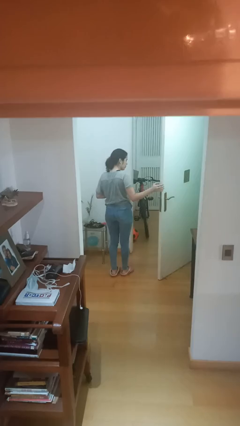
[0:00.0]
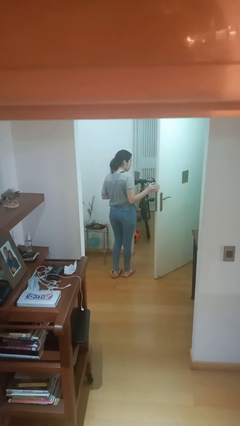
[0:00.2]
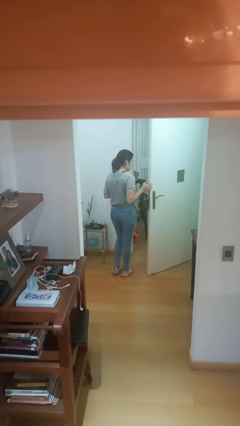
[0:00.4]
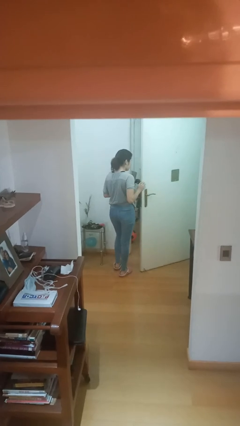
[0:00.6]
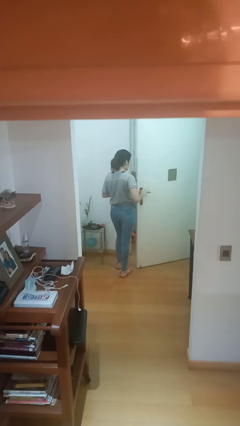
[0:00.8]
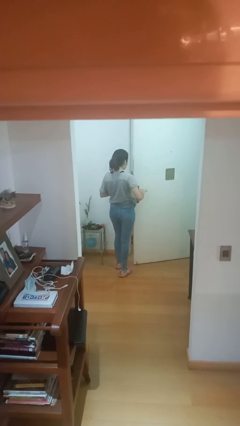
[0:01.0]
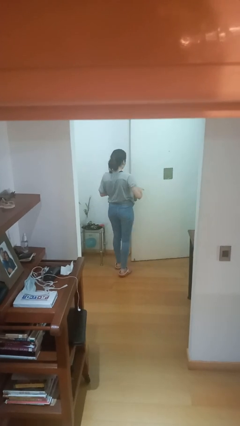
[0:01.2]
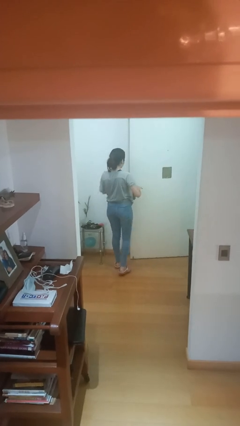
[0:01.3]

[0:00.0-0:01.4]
person closes facility door

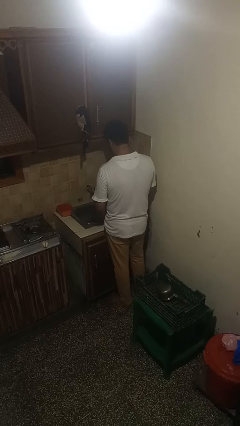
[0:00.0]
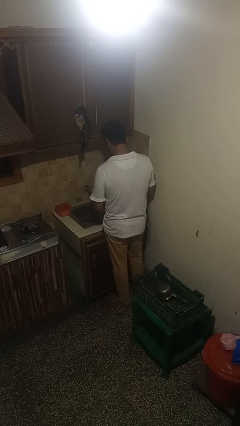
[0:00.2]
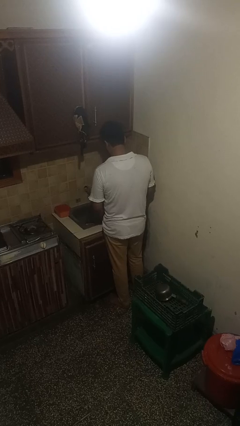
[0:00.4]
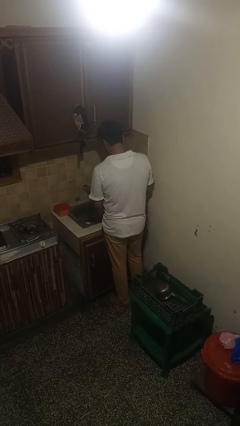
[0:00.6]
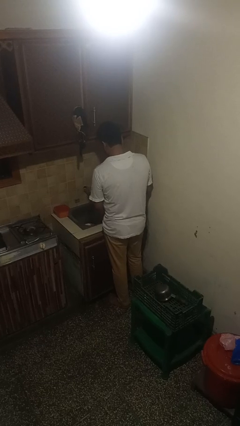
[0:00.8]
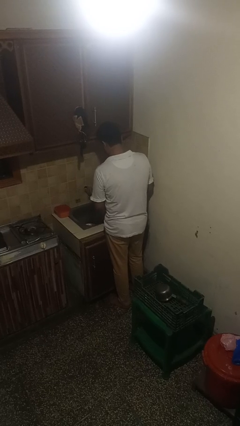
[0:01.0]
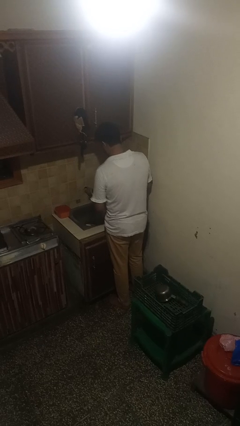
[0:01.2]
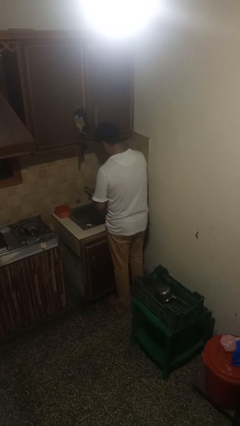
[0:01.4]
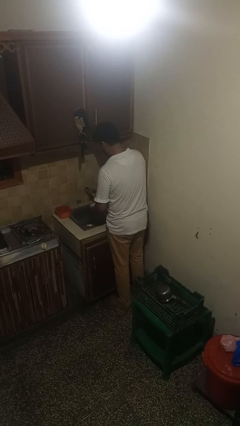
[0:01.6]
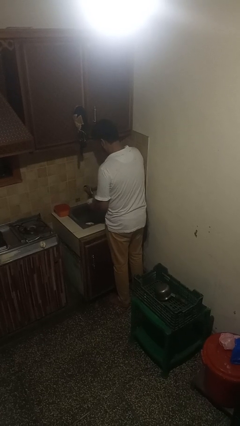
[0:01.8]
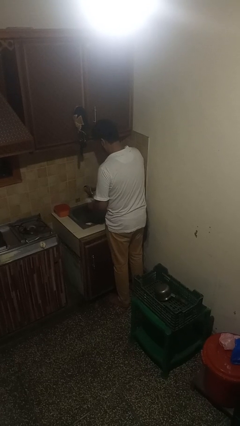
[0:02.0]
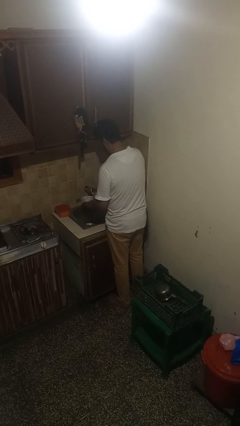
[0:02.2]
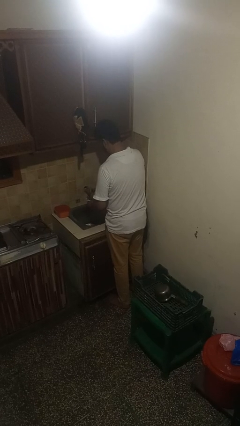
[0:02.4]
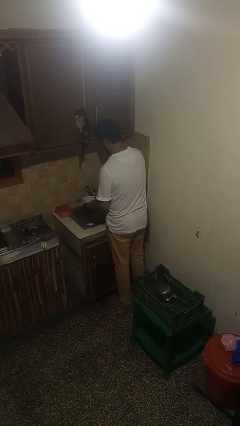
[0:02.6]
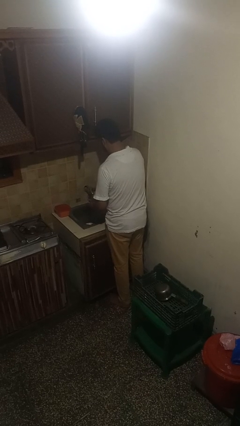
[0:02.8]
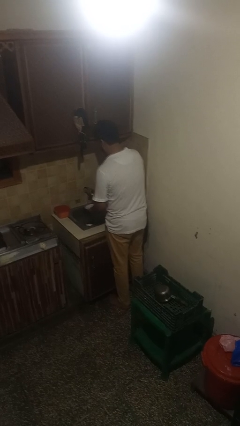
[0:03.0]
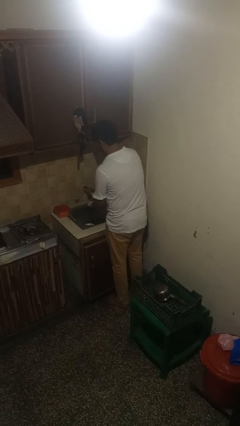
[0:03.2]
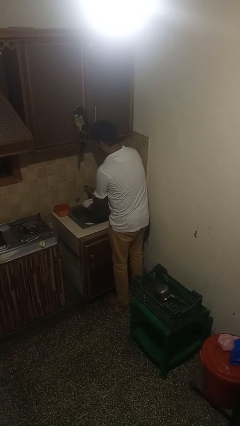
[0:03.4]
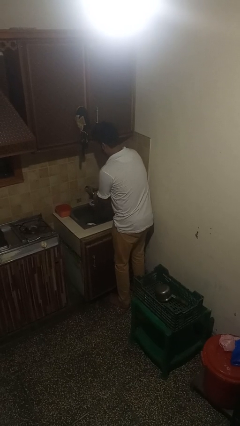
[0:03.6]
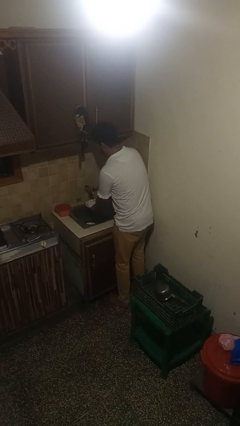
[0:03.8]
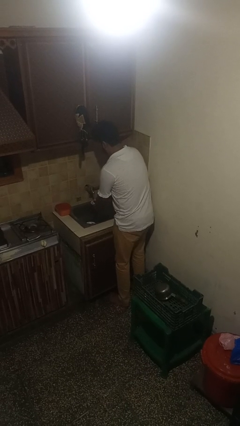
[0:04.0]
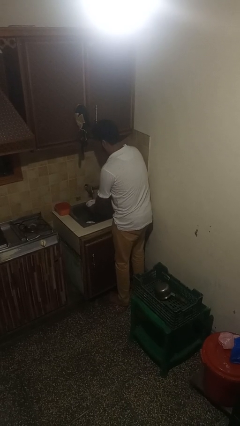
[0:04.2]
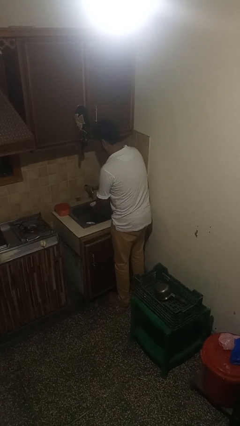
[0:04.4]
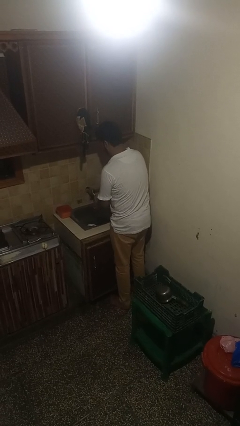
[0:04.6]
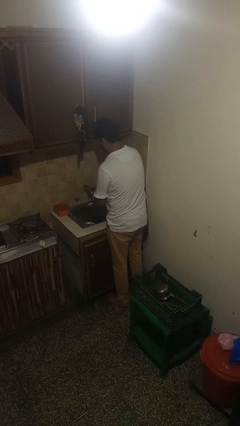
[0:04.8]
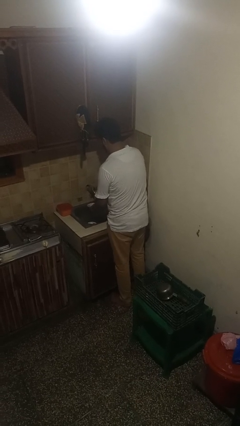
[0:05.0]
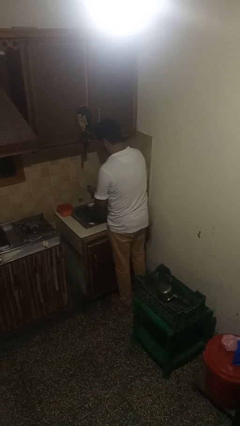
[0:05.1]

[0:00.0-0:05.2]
person washes dish

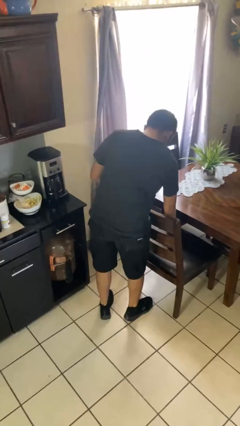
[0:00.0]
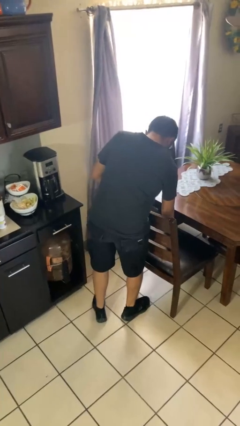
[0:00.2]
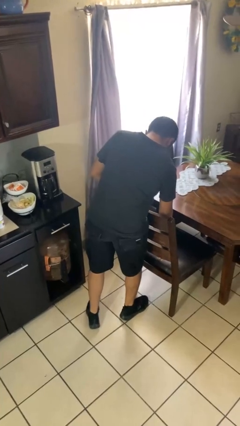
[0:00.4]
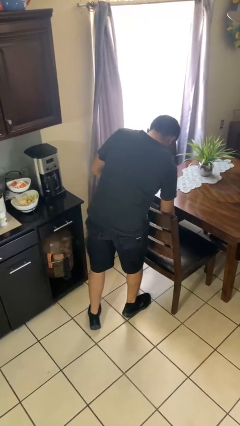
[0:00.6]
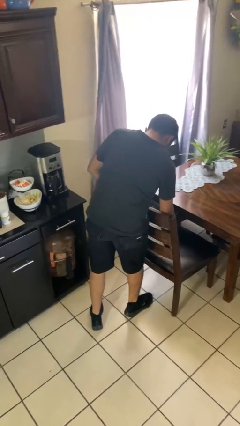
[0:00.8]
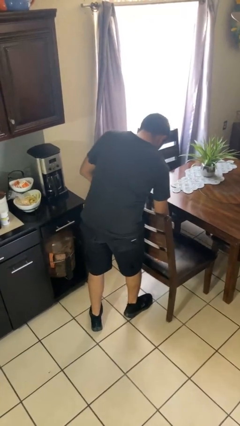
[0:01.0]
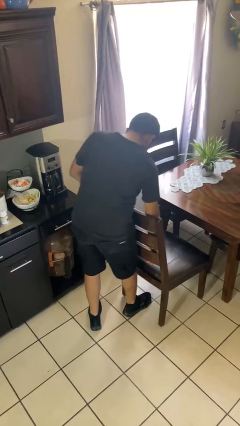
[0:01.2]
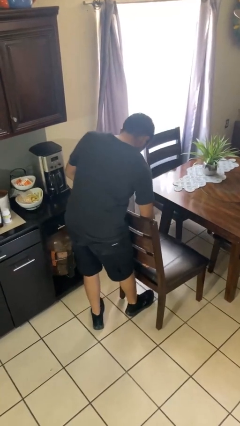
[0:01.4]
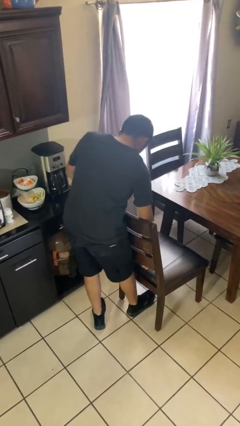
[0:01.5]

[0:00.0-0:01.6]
person pulls out chair

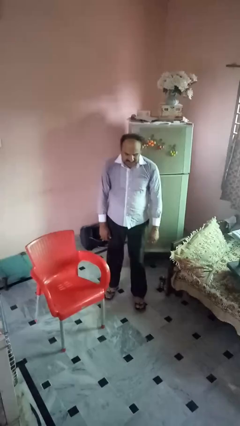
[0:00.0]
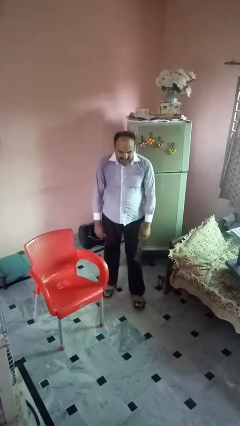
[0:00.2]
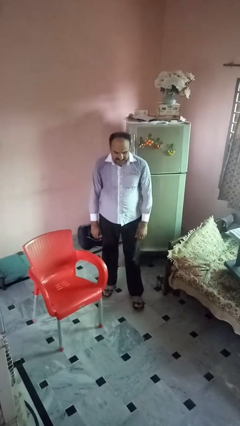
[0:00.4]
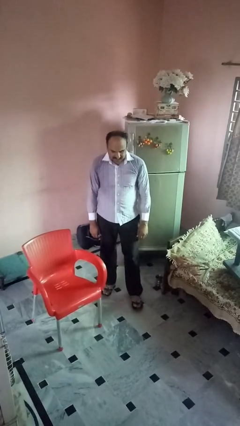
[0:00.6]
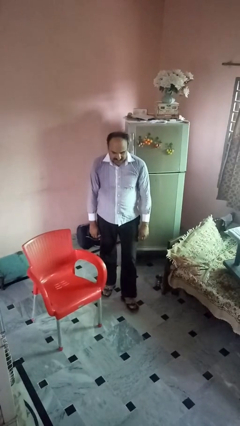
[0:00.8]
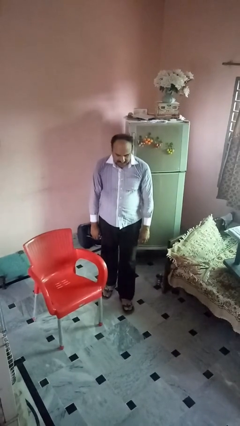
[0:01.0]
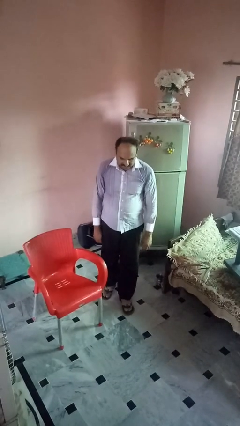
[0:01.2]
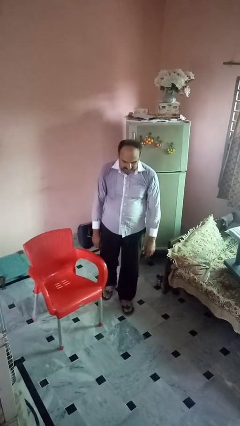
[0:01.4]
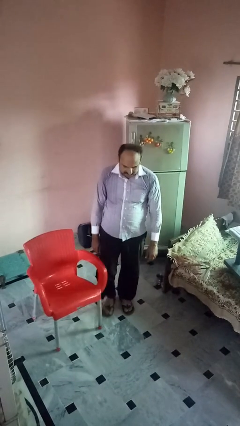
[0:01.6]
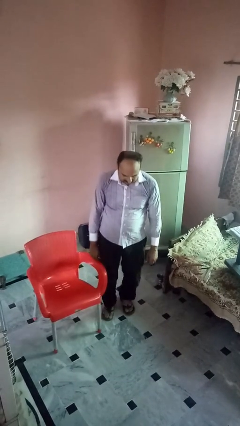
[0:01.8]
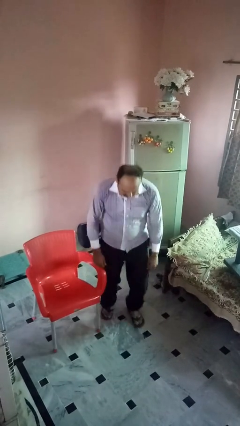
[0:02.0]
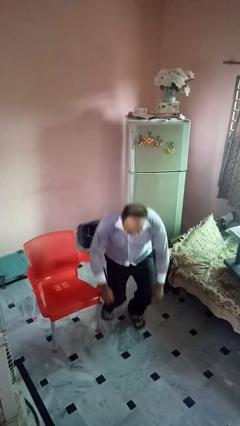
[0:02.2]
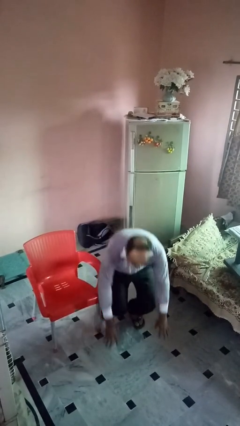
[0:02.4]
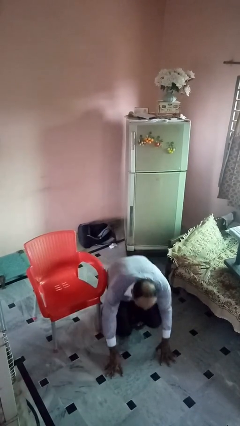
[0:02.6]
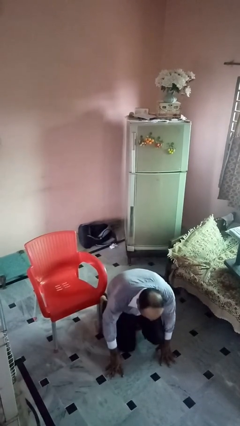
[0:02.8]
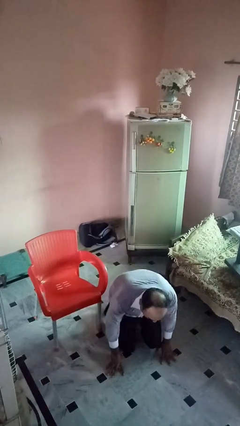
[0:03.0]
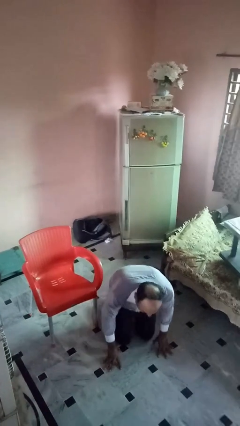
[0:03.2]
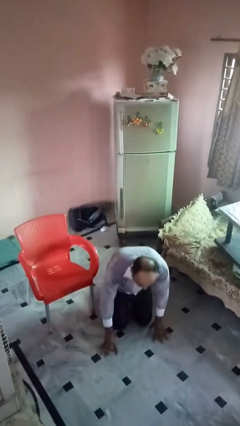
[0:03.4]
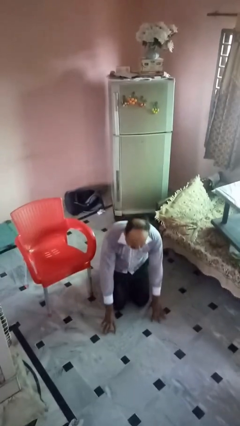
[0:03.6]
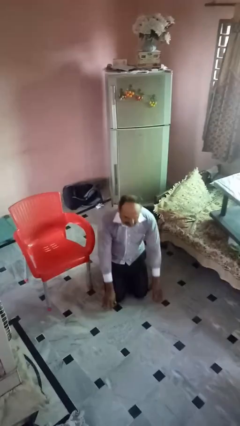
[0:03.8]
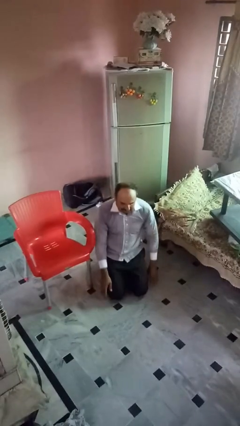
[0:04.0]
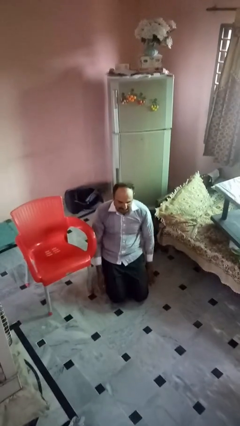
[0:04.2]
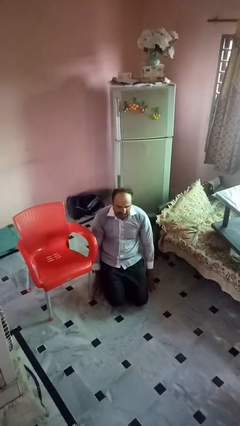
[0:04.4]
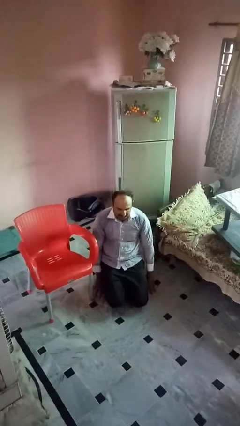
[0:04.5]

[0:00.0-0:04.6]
person trips on object on floor

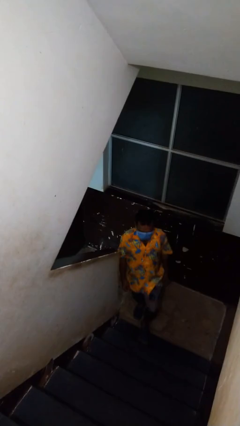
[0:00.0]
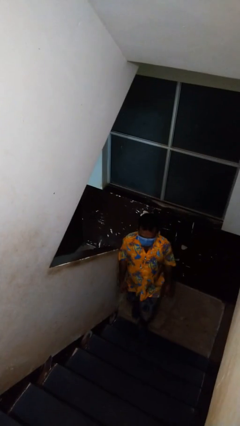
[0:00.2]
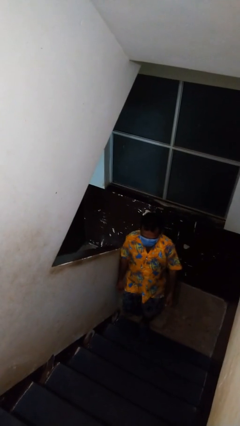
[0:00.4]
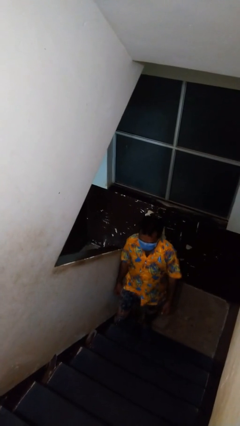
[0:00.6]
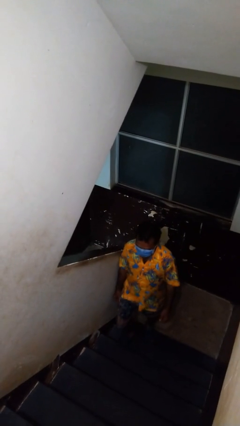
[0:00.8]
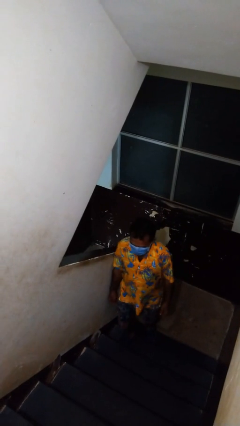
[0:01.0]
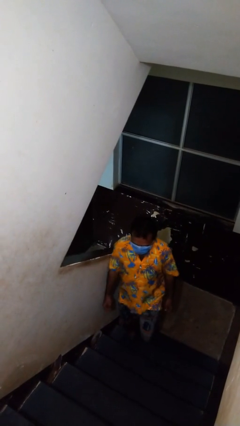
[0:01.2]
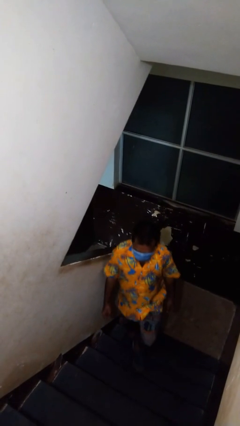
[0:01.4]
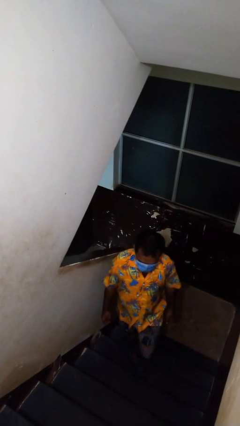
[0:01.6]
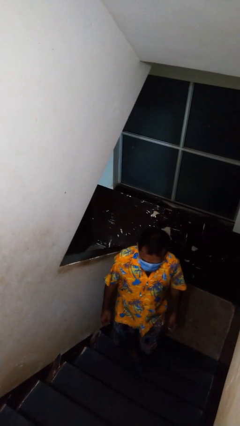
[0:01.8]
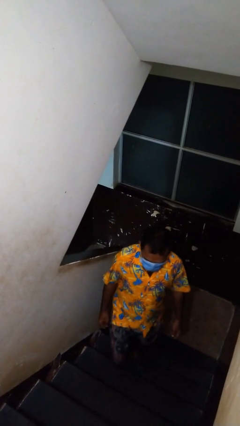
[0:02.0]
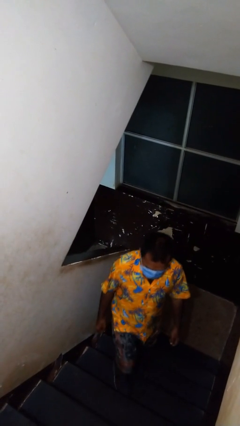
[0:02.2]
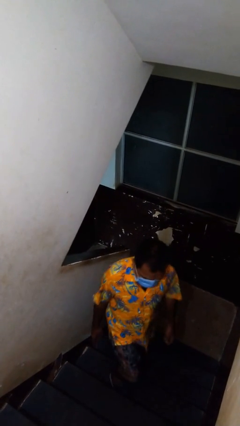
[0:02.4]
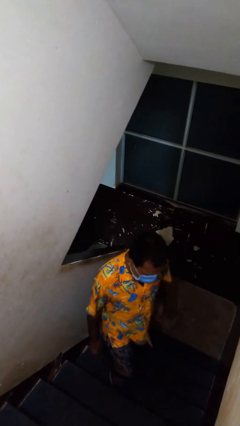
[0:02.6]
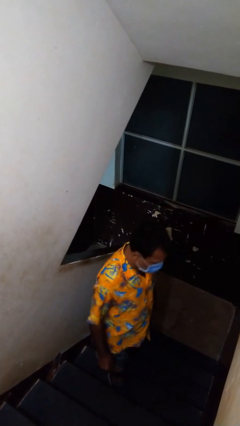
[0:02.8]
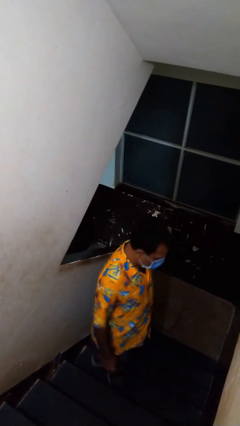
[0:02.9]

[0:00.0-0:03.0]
person climbs up stairs

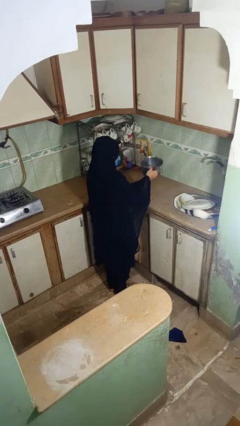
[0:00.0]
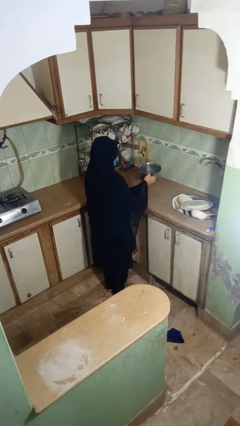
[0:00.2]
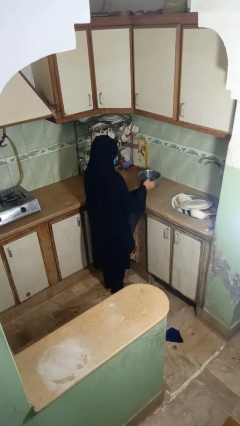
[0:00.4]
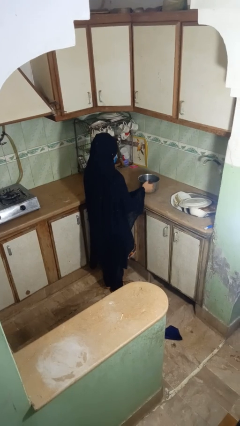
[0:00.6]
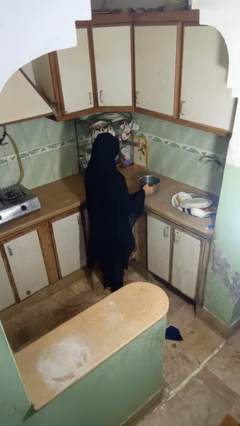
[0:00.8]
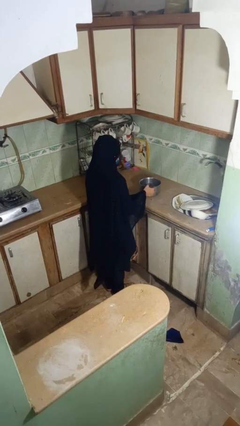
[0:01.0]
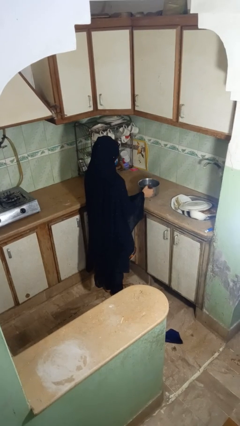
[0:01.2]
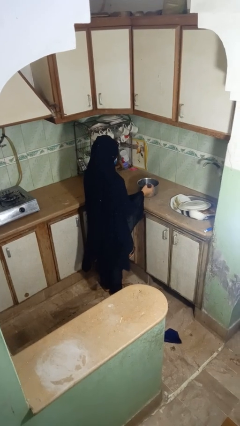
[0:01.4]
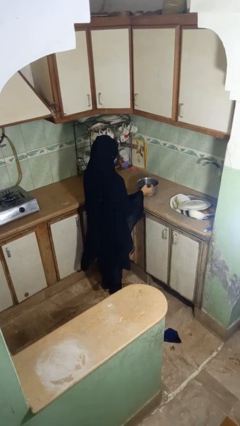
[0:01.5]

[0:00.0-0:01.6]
person puts down object on countertop

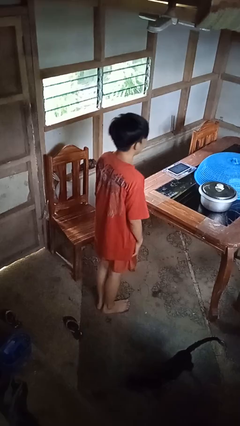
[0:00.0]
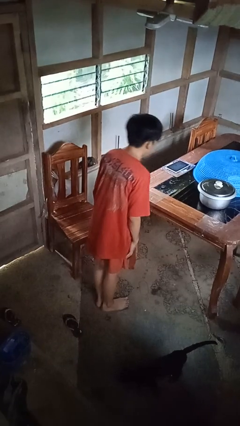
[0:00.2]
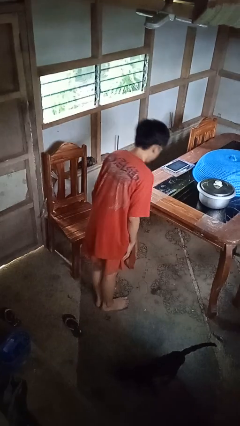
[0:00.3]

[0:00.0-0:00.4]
person bows
